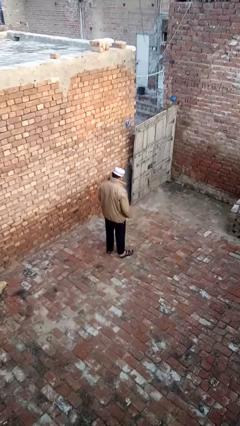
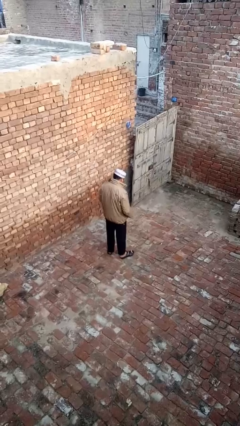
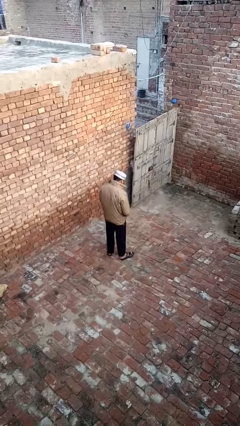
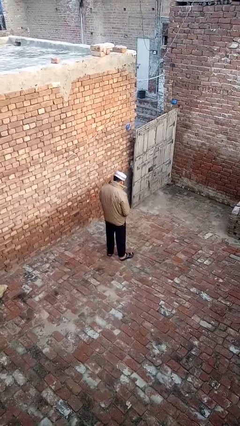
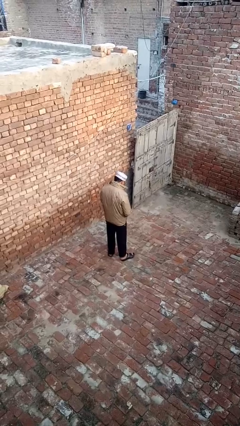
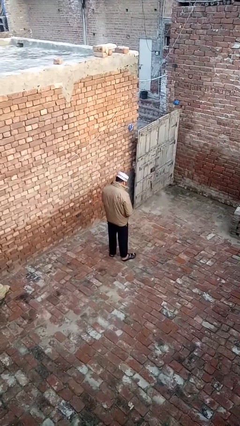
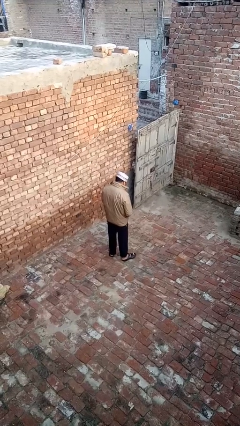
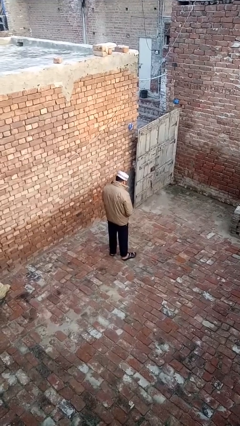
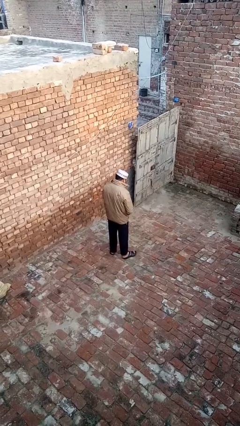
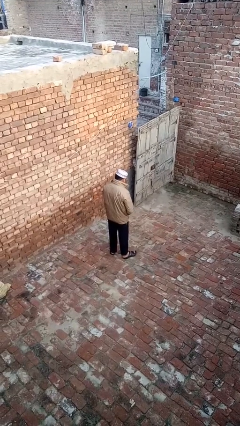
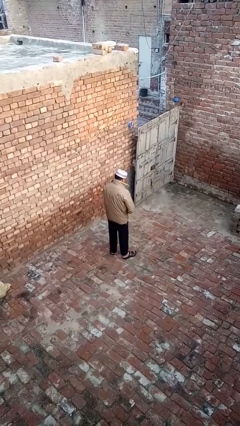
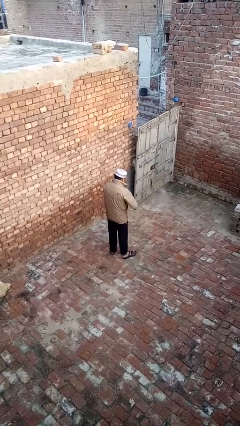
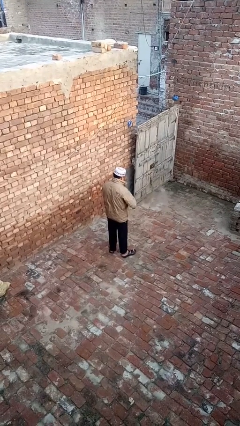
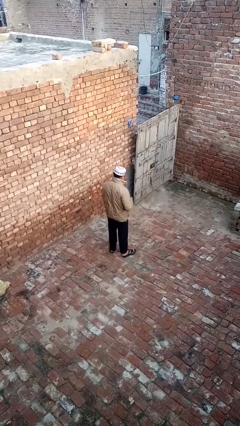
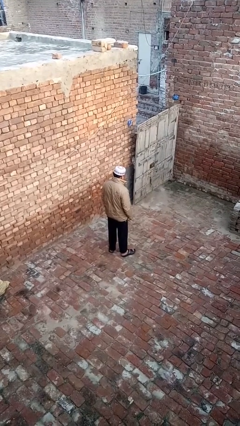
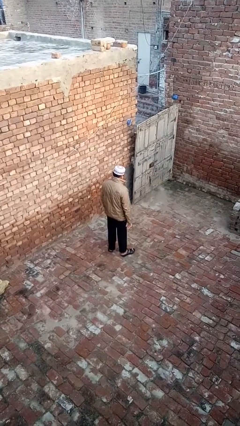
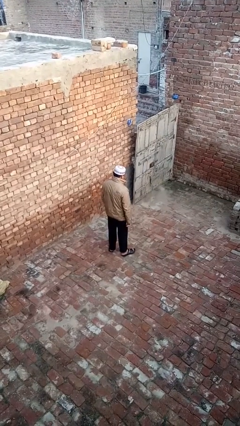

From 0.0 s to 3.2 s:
person zips up jacket

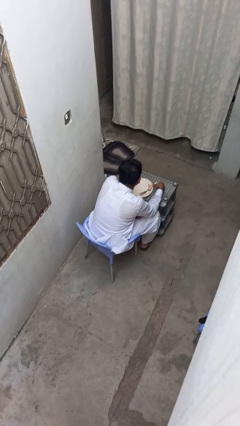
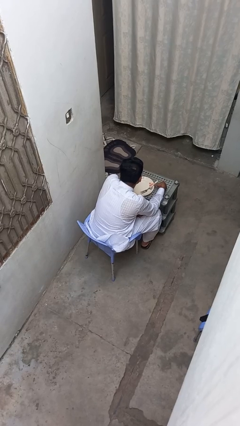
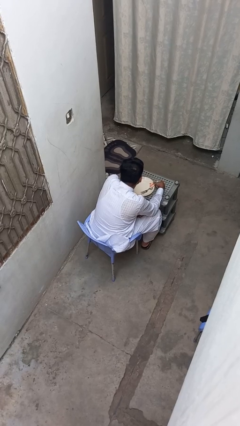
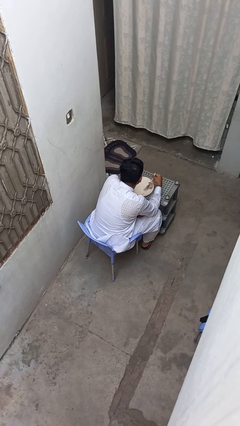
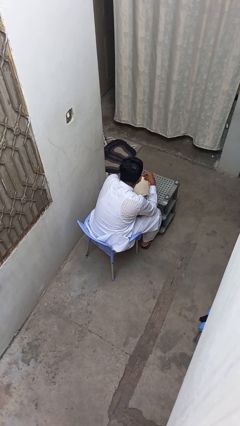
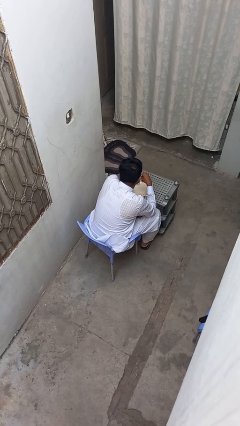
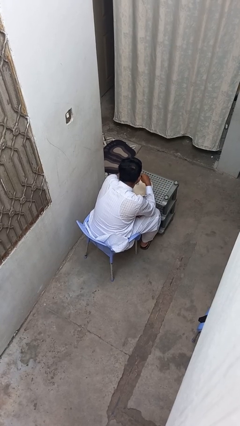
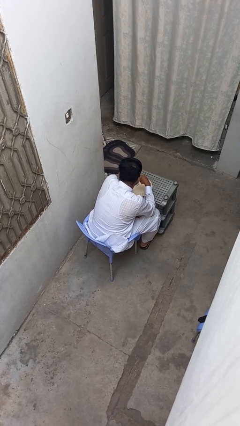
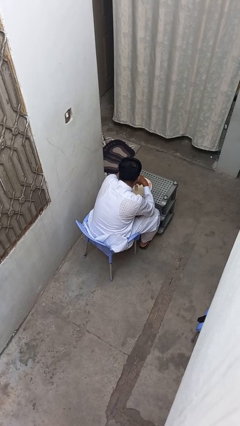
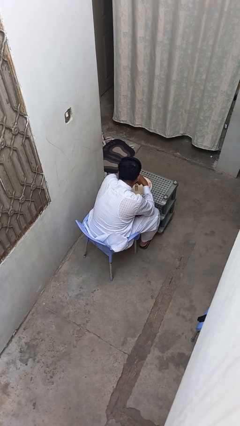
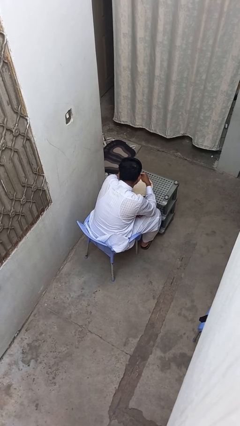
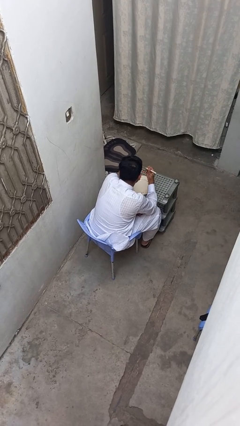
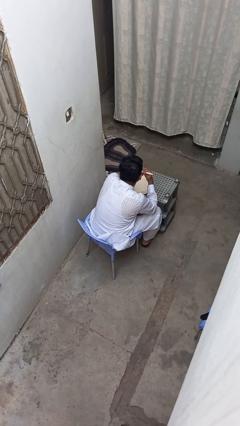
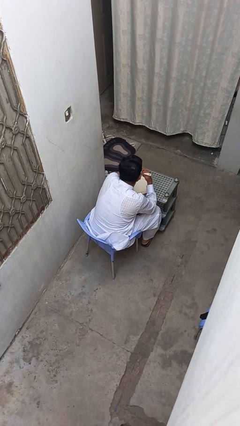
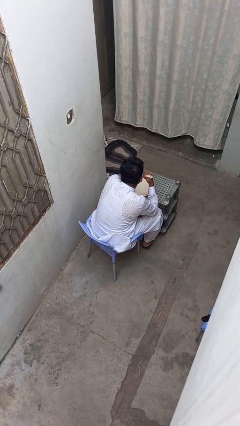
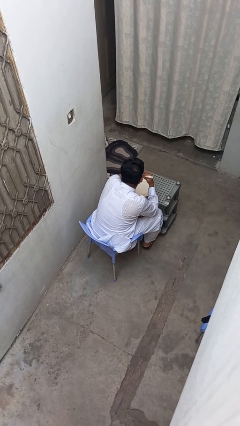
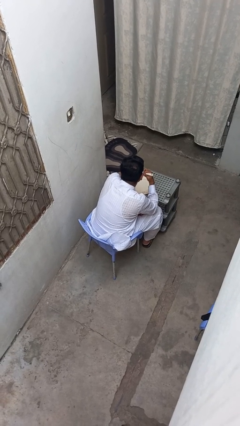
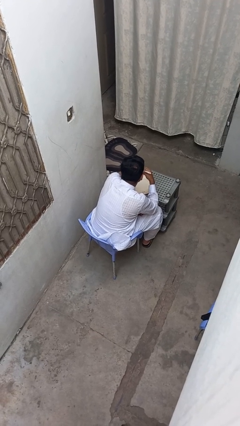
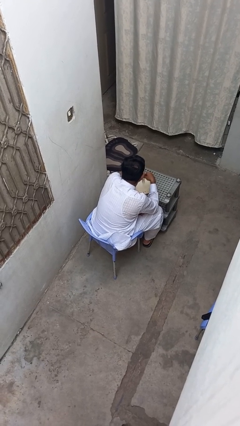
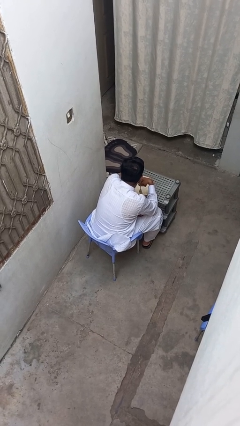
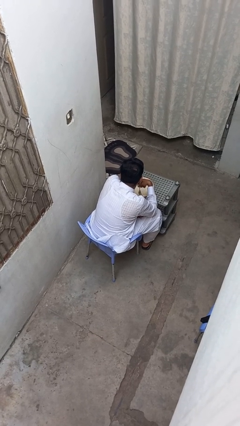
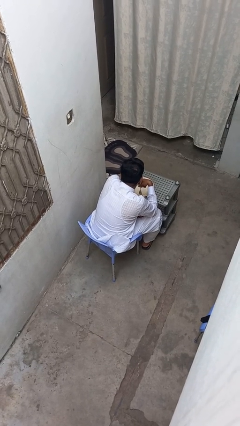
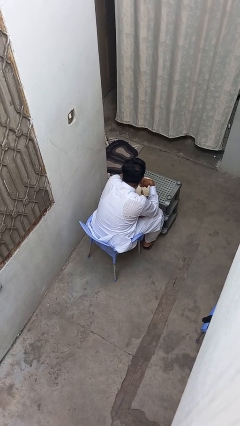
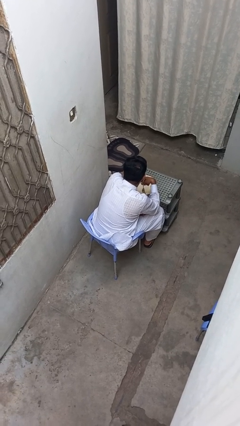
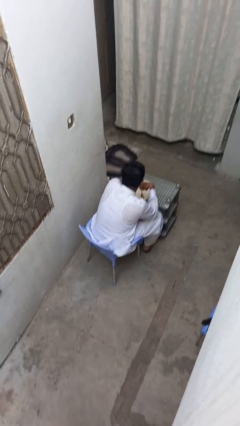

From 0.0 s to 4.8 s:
person eats with utensil

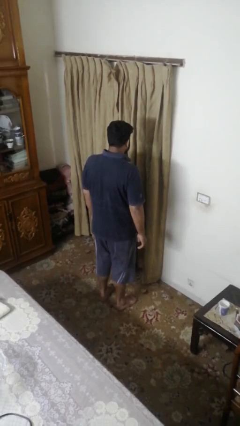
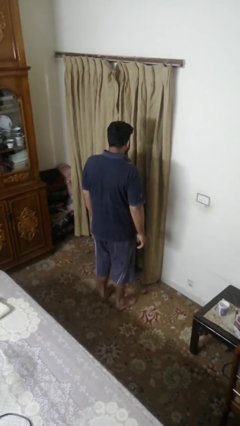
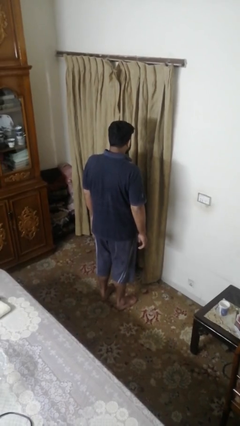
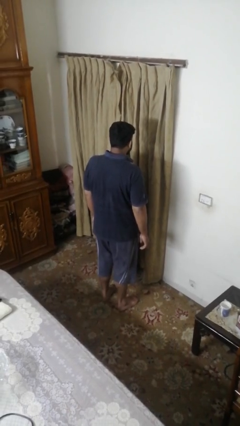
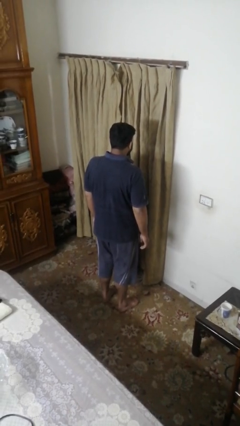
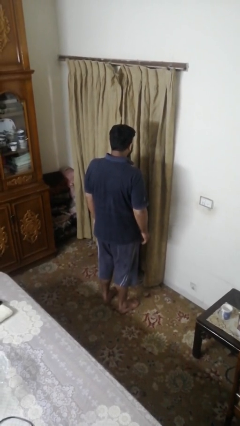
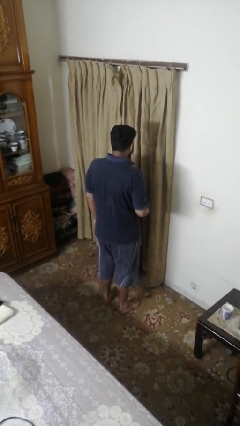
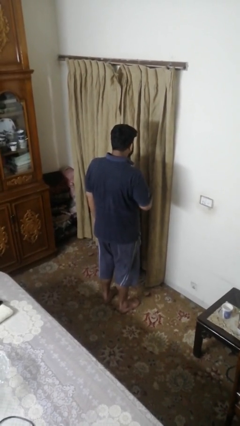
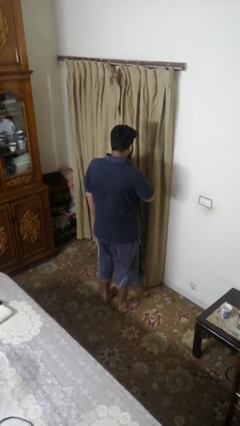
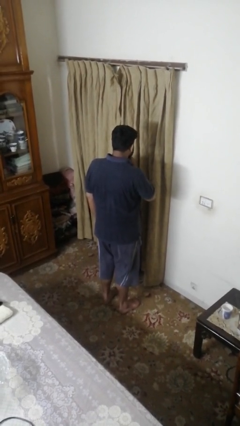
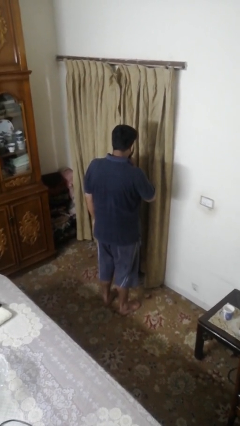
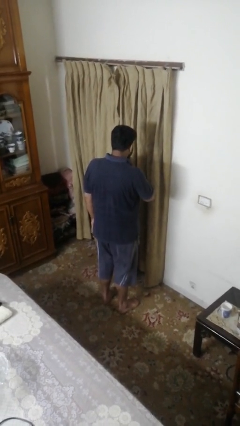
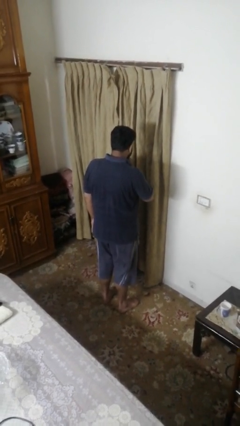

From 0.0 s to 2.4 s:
person gestures be quiet

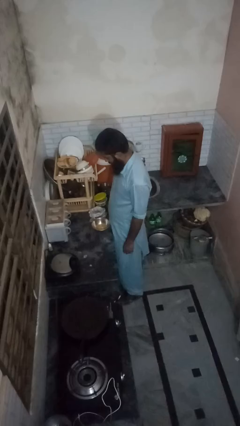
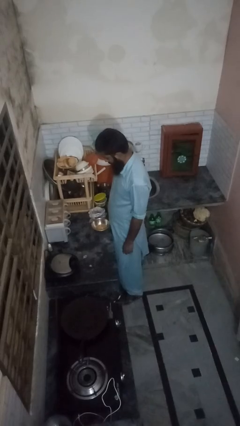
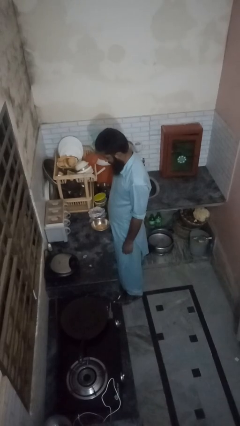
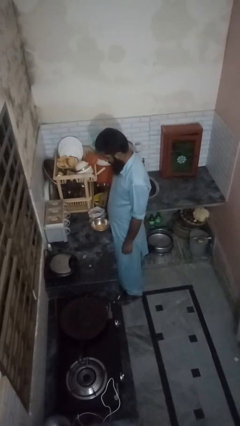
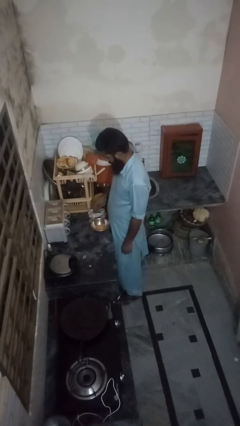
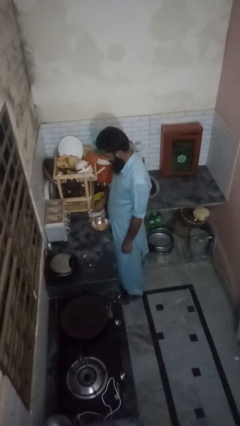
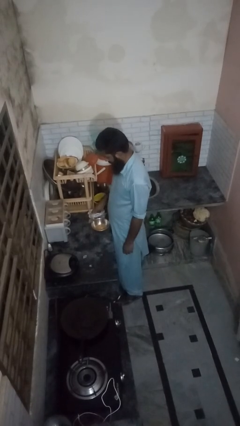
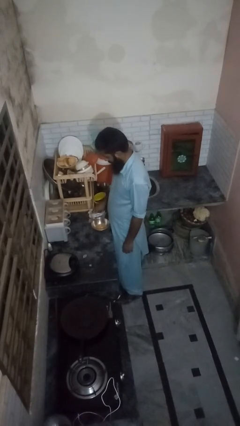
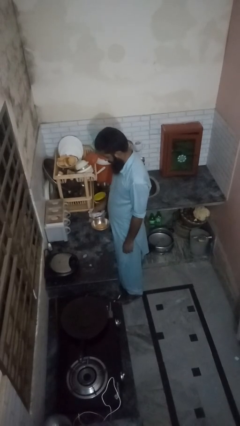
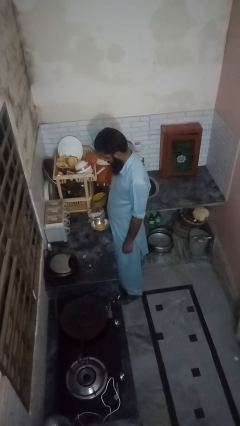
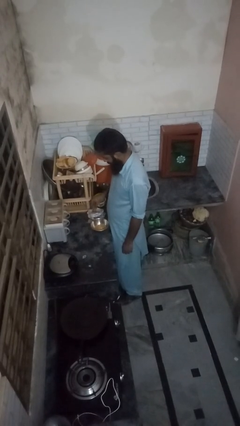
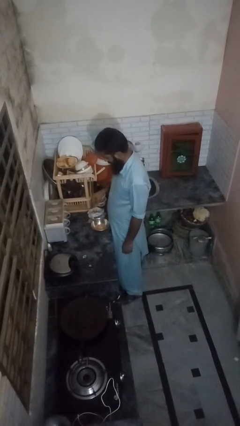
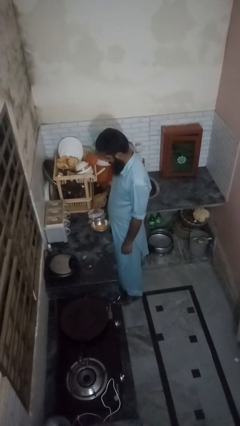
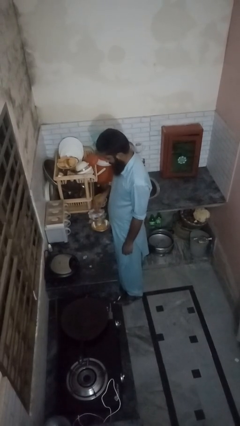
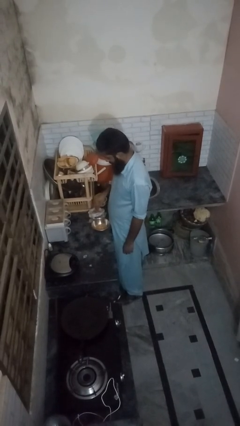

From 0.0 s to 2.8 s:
person pours into bowl

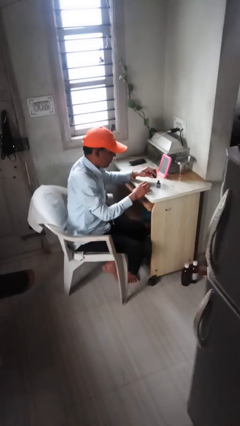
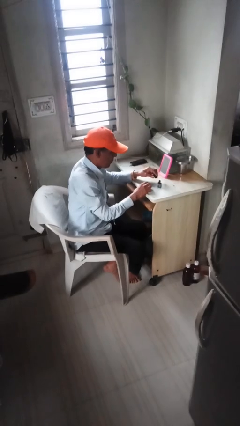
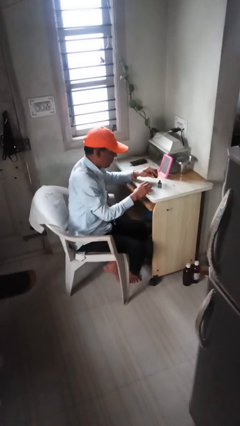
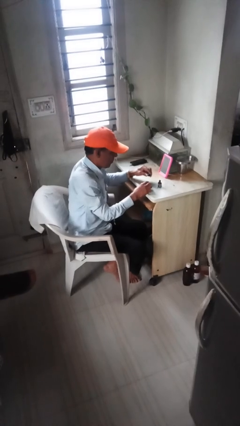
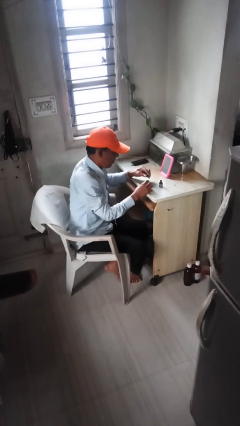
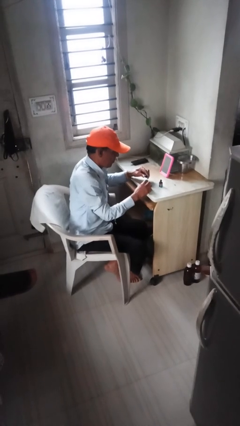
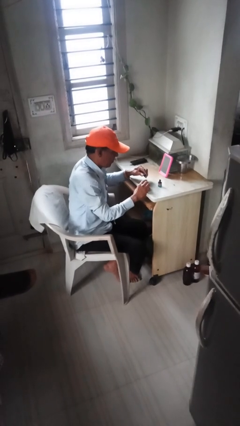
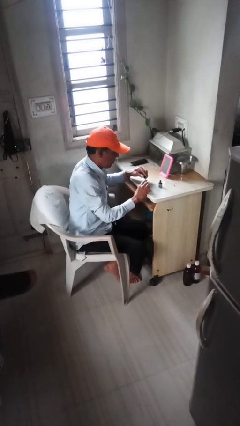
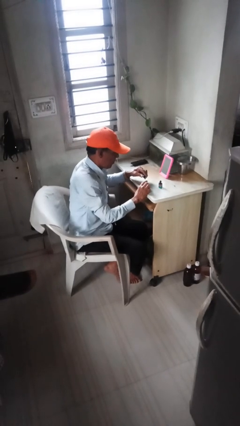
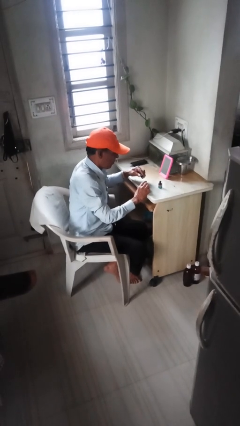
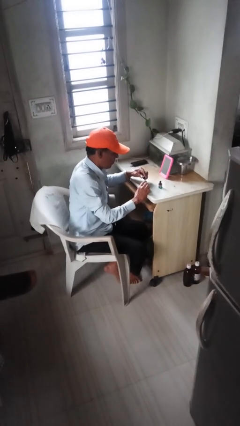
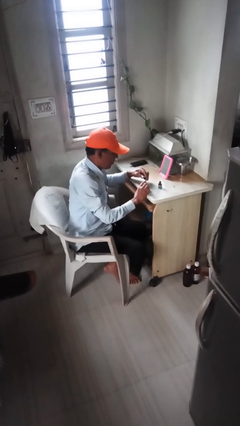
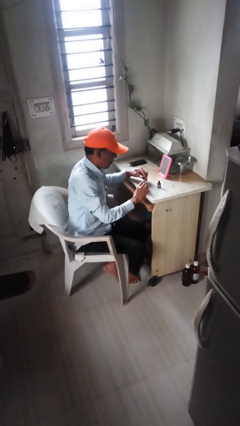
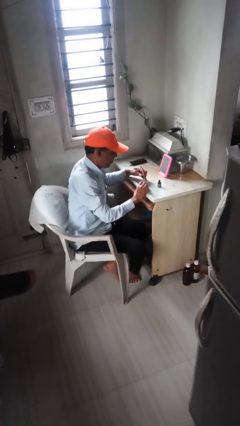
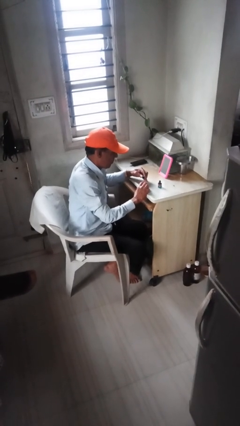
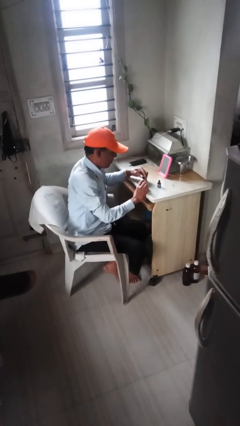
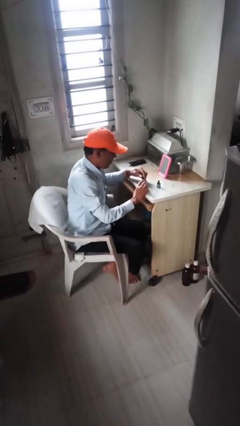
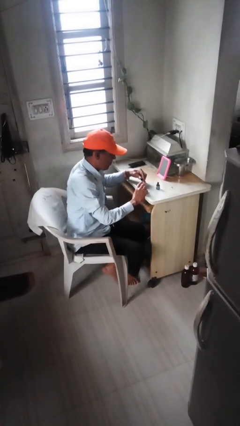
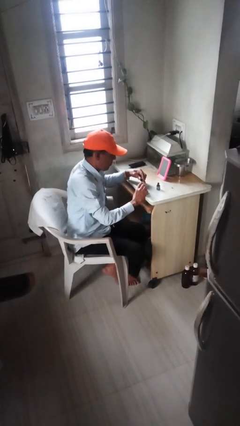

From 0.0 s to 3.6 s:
person paints fingernails

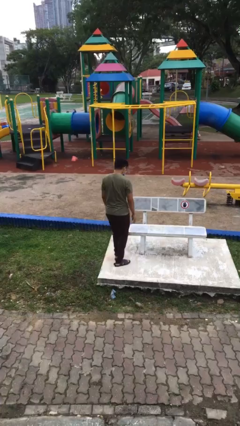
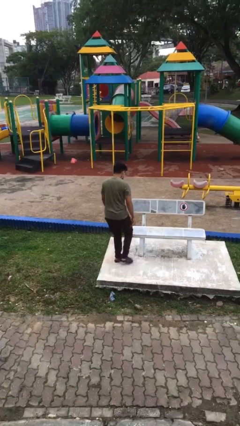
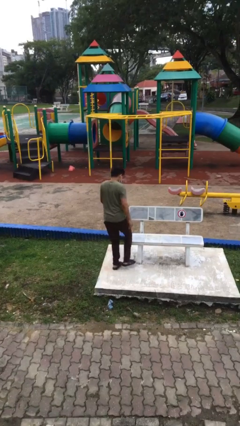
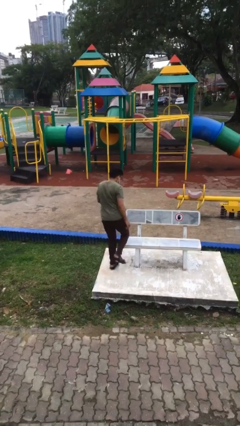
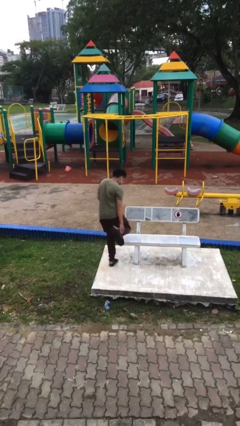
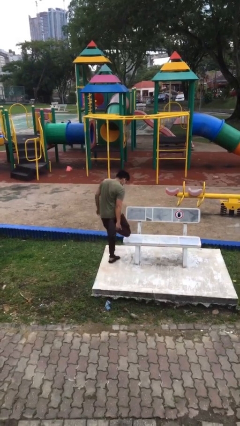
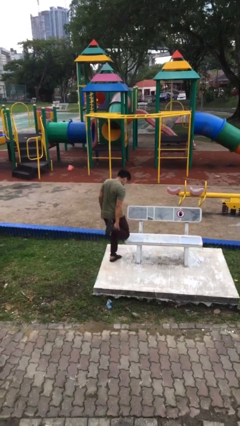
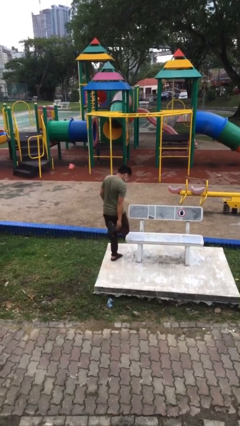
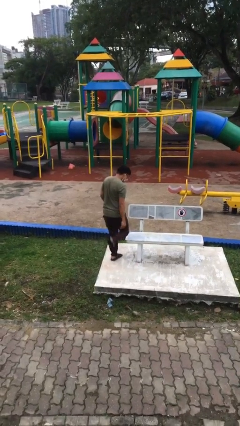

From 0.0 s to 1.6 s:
person stubs toe
